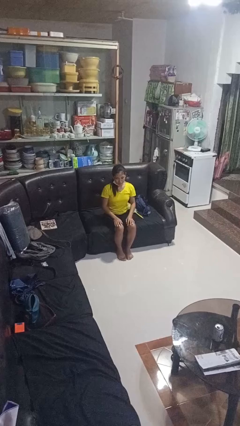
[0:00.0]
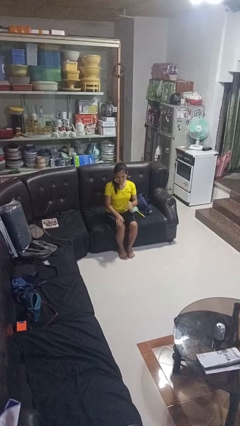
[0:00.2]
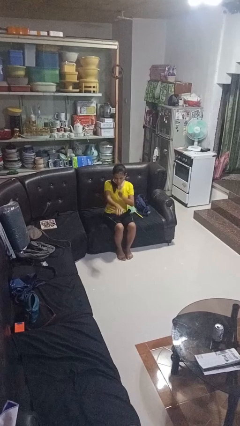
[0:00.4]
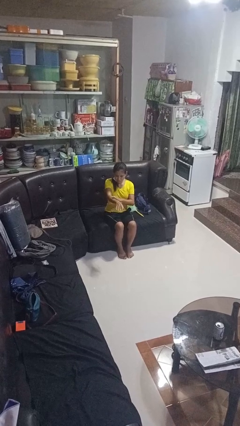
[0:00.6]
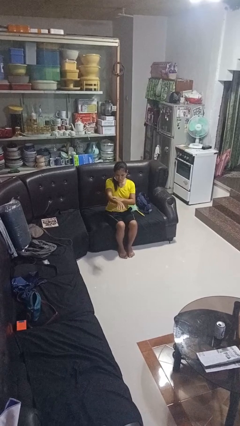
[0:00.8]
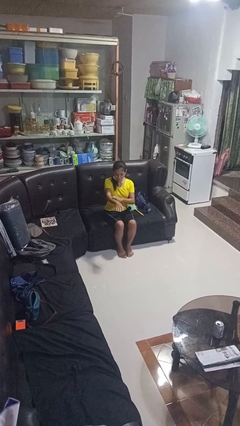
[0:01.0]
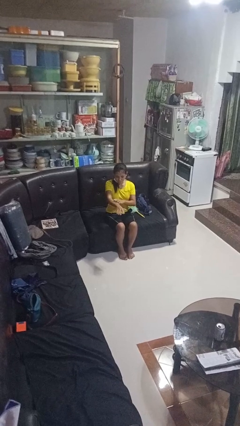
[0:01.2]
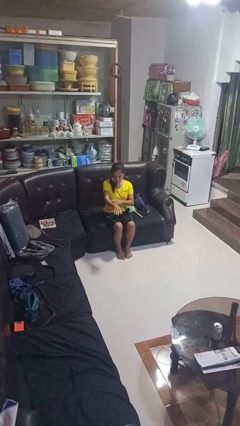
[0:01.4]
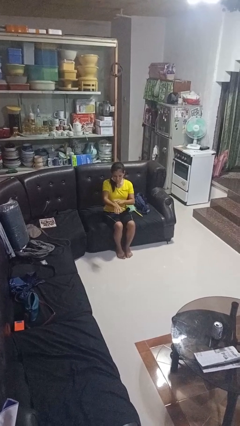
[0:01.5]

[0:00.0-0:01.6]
person swats bug

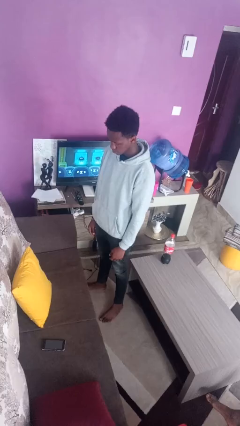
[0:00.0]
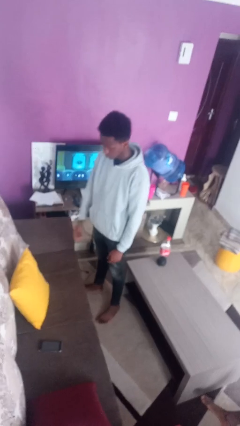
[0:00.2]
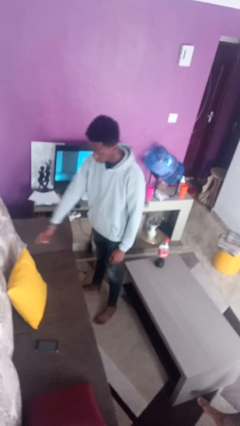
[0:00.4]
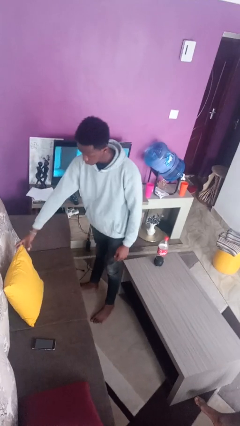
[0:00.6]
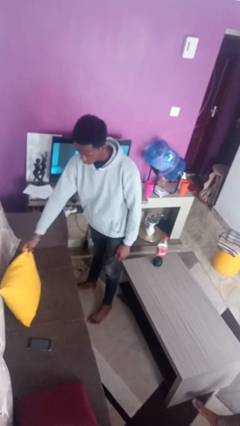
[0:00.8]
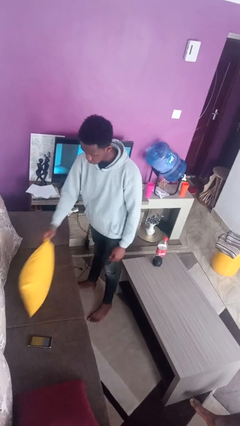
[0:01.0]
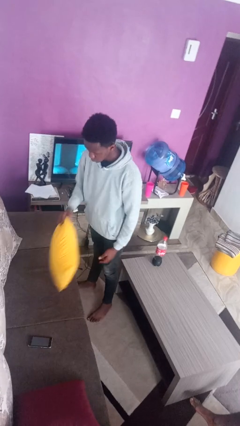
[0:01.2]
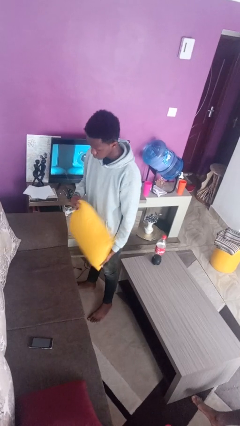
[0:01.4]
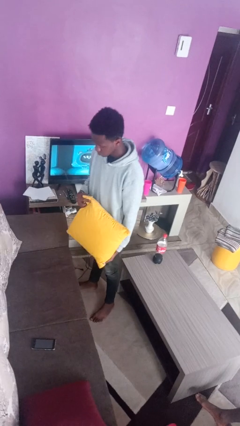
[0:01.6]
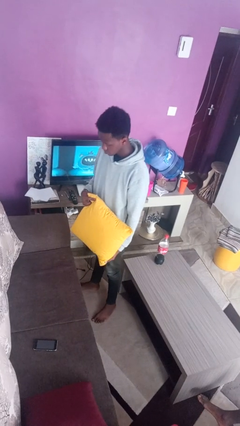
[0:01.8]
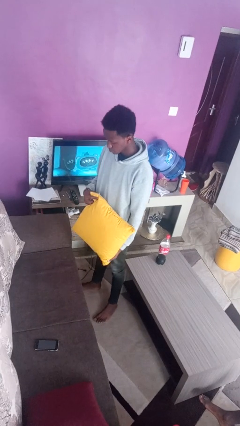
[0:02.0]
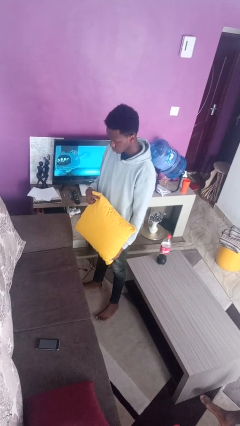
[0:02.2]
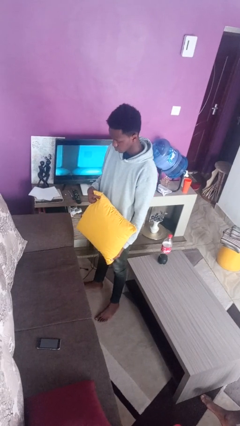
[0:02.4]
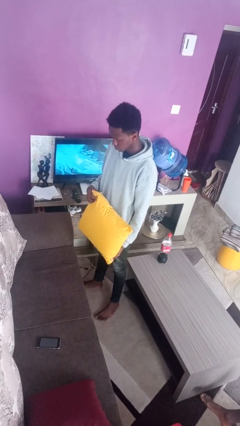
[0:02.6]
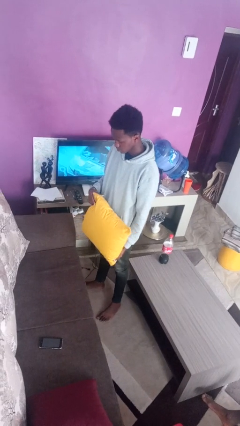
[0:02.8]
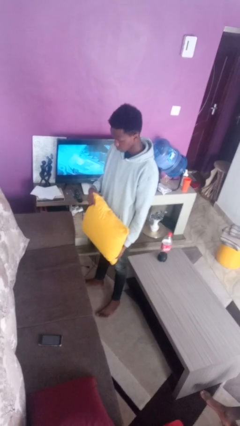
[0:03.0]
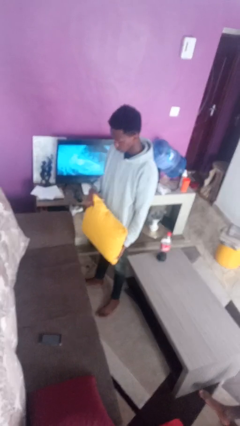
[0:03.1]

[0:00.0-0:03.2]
person picks up object from couch

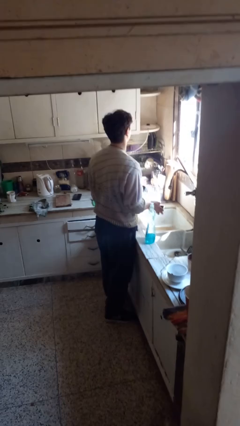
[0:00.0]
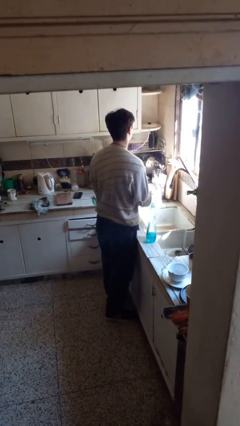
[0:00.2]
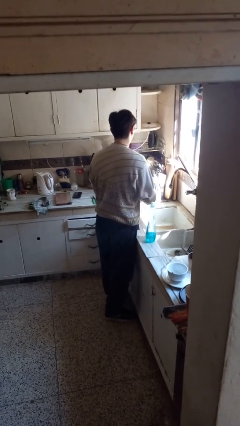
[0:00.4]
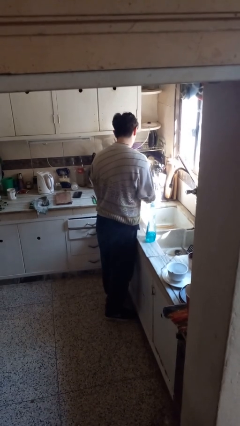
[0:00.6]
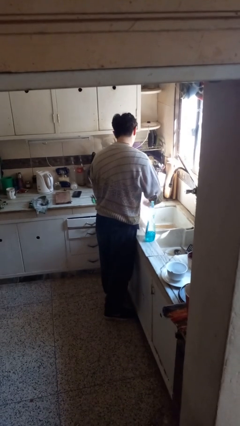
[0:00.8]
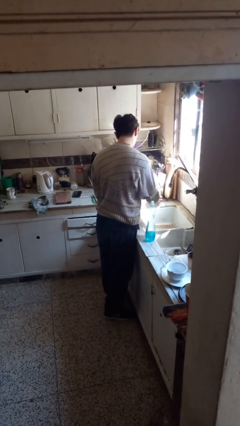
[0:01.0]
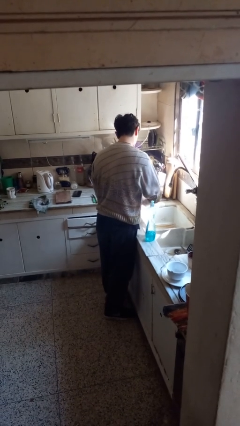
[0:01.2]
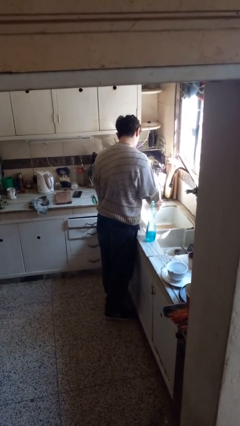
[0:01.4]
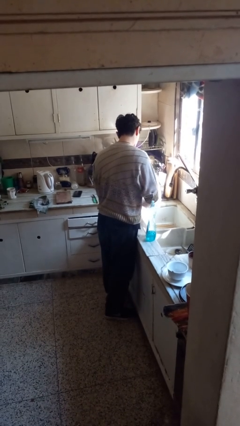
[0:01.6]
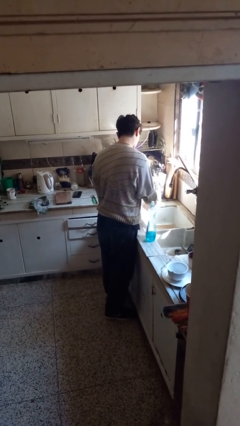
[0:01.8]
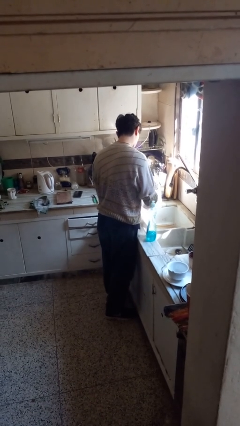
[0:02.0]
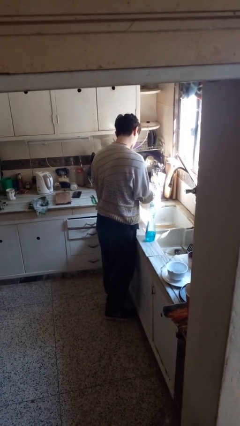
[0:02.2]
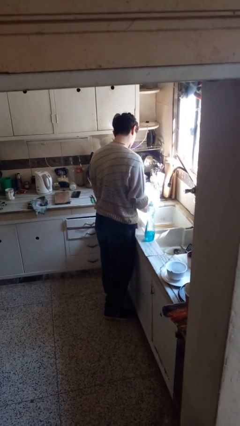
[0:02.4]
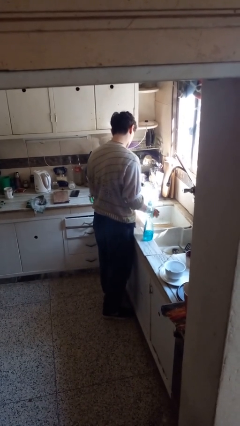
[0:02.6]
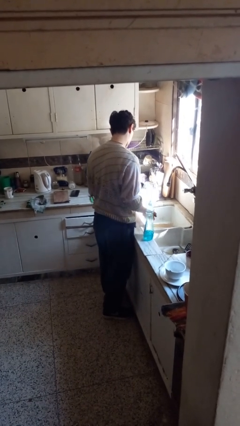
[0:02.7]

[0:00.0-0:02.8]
person washes dish

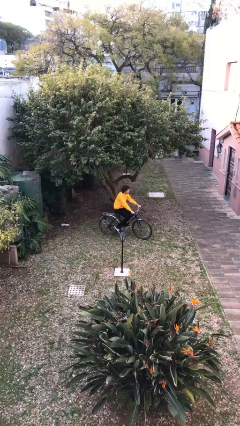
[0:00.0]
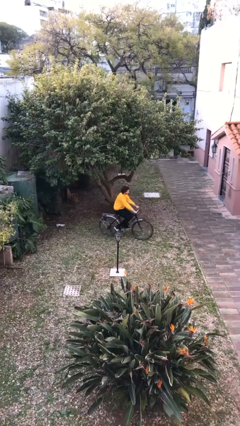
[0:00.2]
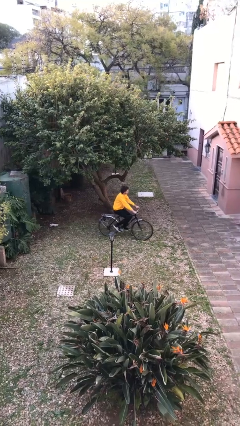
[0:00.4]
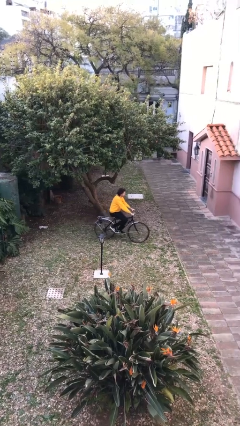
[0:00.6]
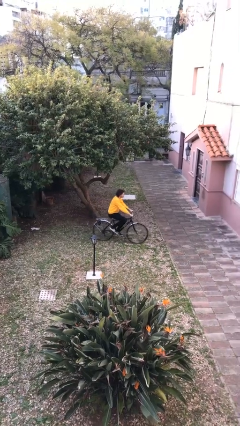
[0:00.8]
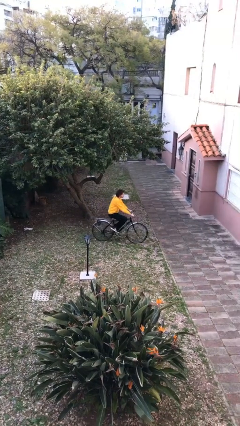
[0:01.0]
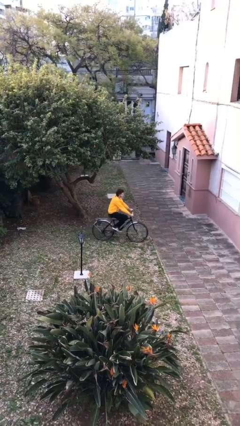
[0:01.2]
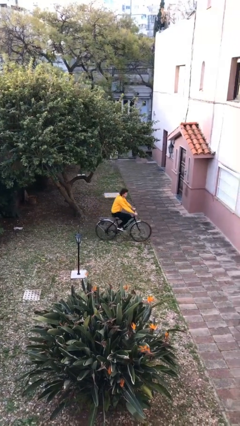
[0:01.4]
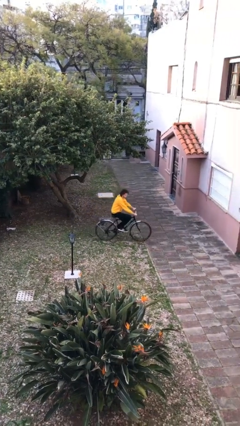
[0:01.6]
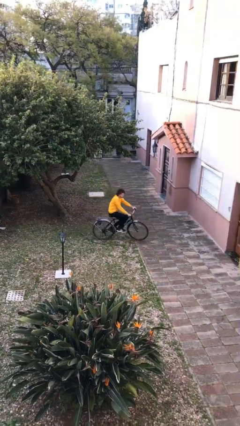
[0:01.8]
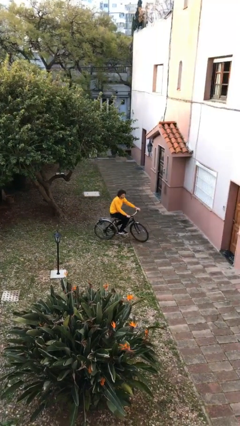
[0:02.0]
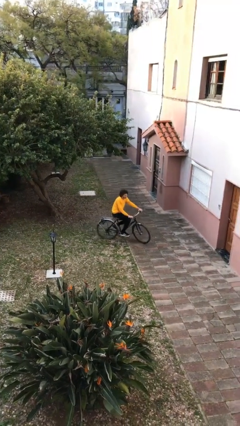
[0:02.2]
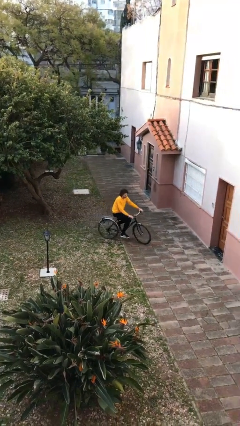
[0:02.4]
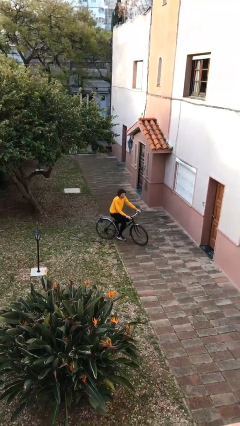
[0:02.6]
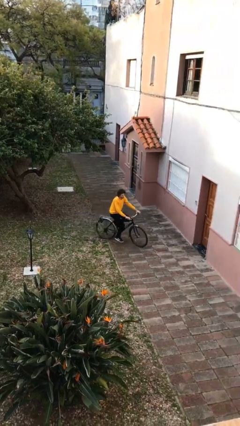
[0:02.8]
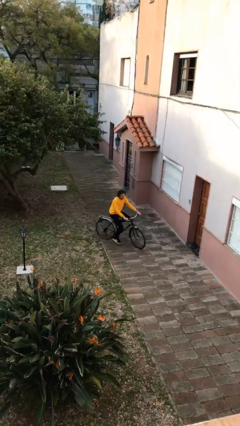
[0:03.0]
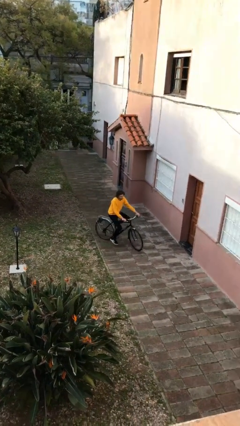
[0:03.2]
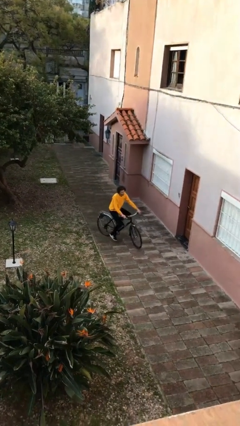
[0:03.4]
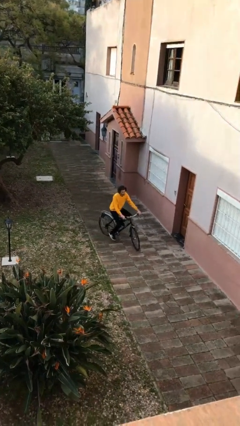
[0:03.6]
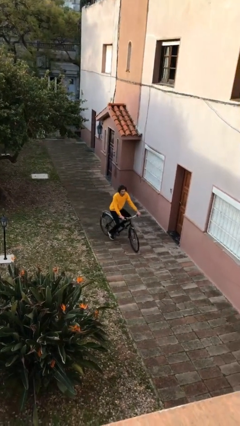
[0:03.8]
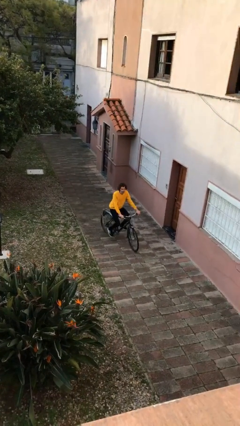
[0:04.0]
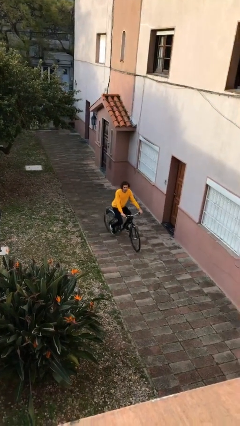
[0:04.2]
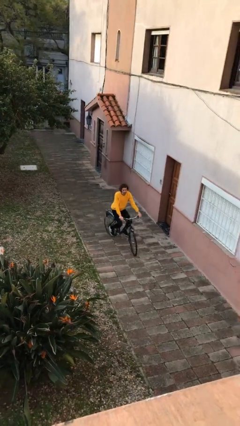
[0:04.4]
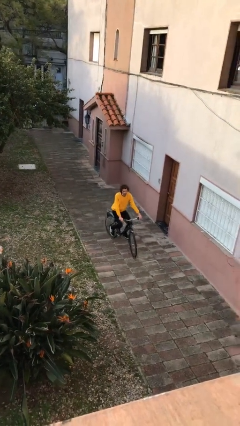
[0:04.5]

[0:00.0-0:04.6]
person rides bicycle

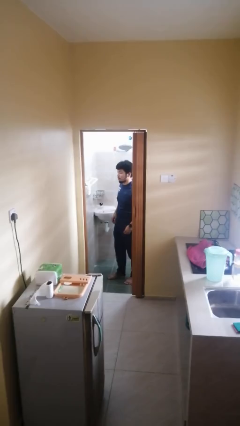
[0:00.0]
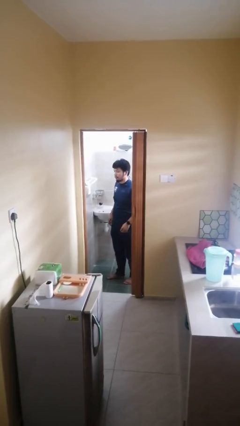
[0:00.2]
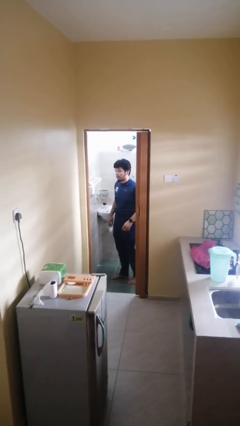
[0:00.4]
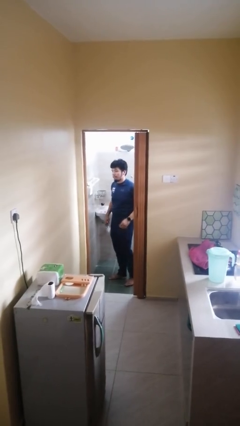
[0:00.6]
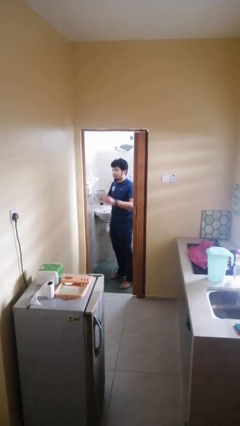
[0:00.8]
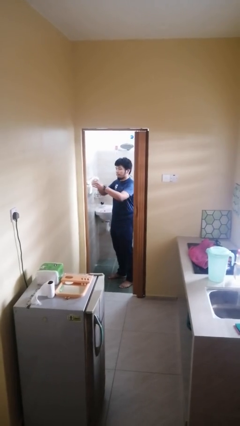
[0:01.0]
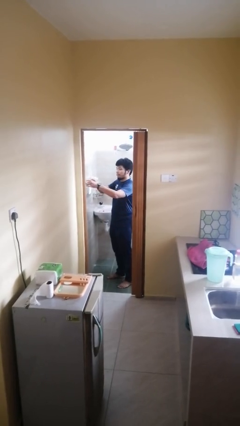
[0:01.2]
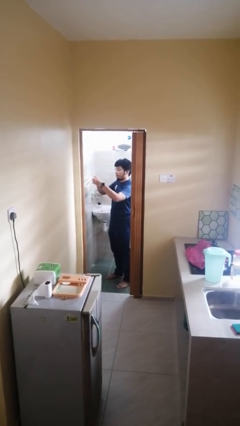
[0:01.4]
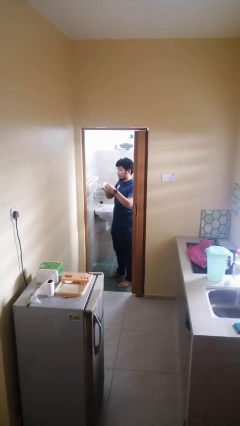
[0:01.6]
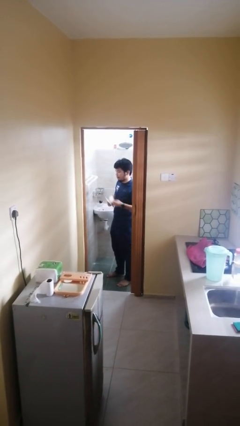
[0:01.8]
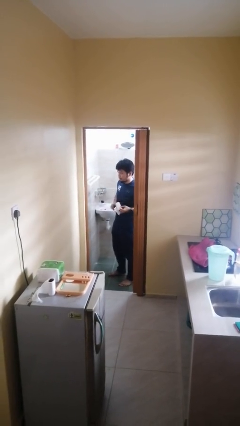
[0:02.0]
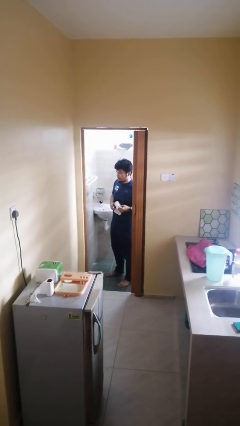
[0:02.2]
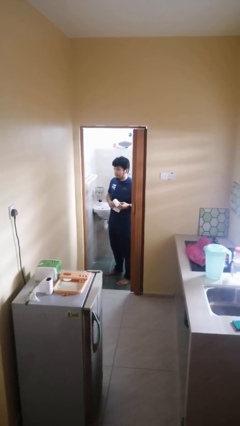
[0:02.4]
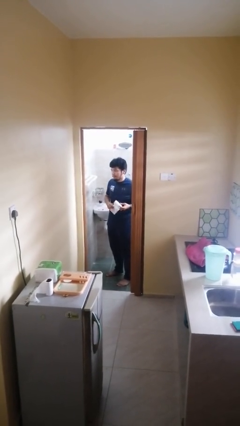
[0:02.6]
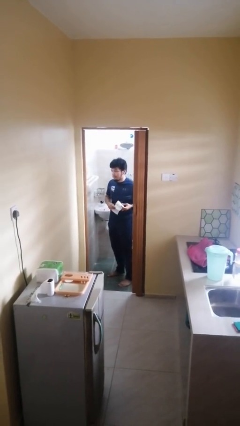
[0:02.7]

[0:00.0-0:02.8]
person picks up object from countertop

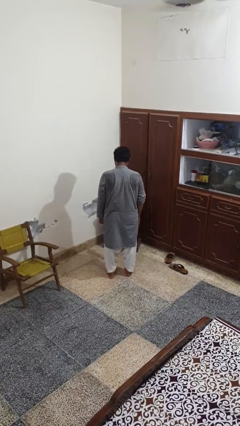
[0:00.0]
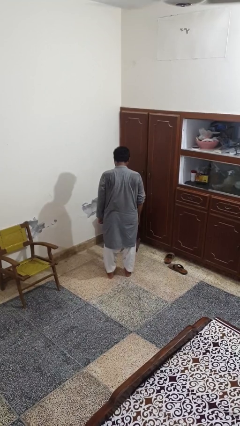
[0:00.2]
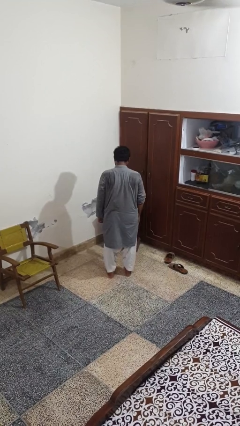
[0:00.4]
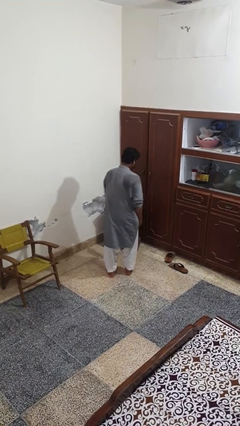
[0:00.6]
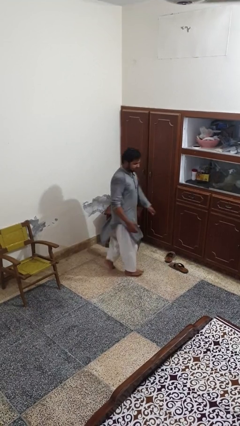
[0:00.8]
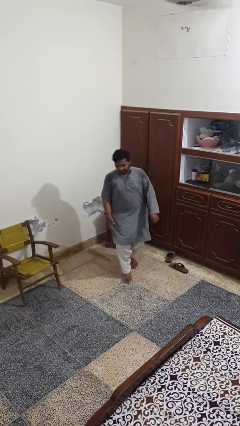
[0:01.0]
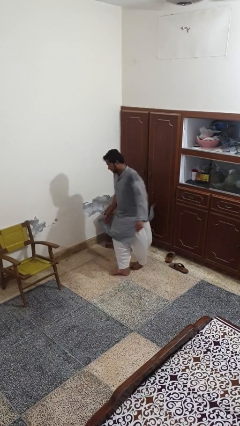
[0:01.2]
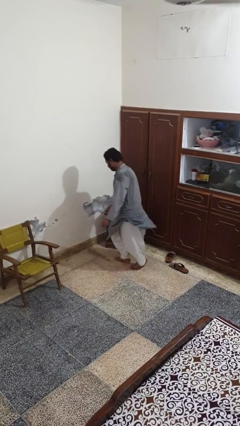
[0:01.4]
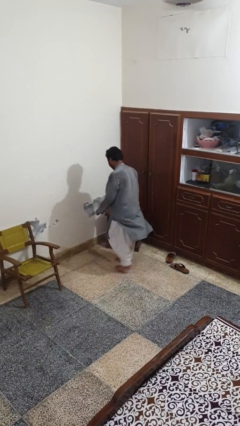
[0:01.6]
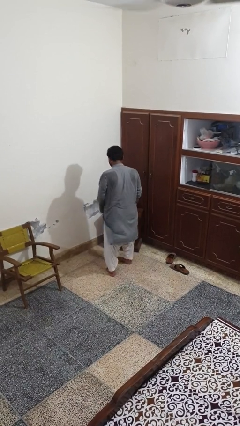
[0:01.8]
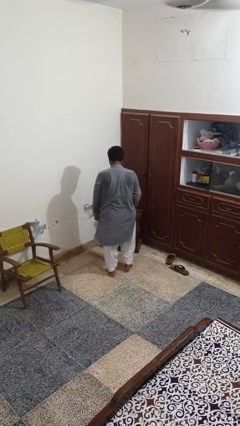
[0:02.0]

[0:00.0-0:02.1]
person twirls
